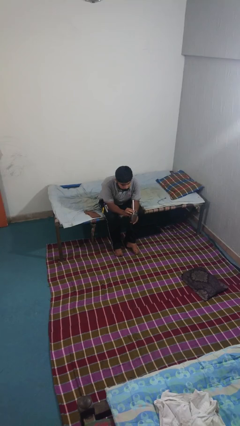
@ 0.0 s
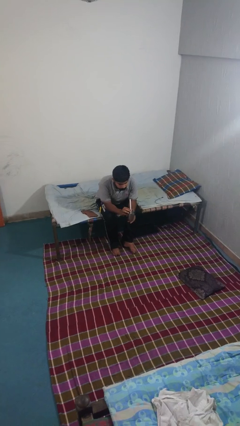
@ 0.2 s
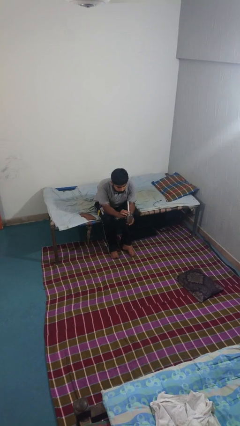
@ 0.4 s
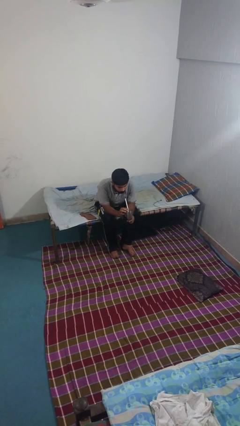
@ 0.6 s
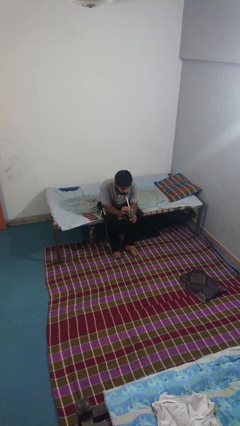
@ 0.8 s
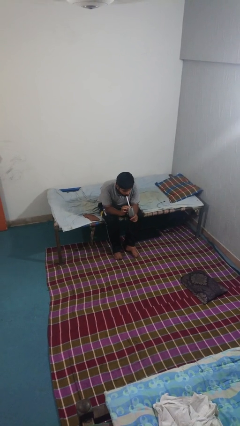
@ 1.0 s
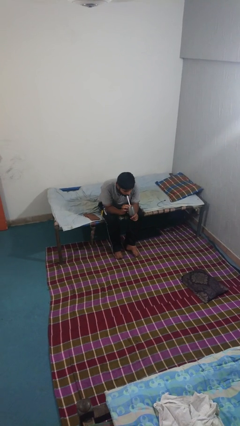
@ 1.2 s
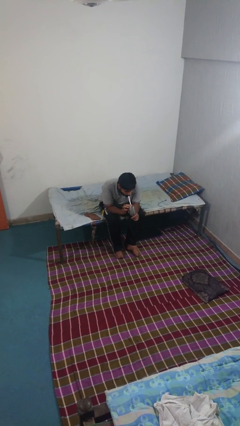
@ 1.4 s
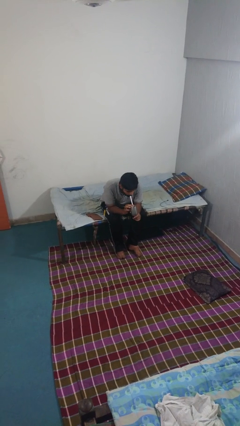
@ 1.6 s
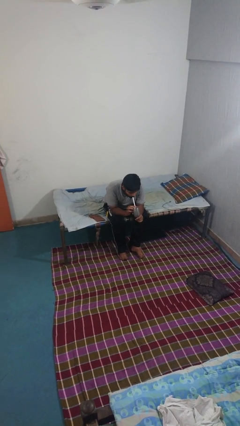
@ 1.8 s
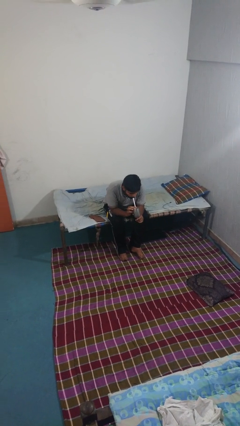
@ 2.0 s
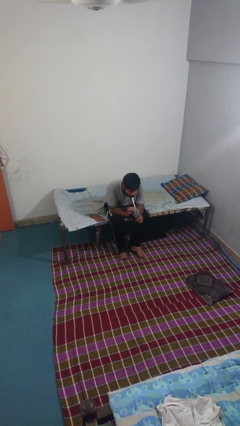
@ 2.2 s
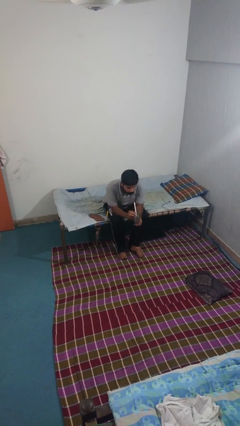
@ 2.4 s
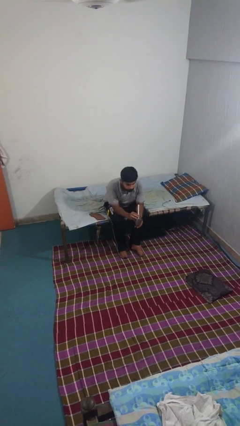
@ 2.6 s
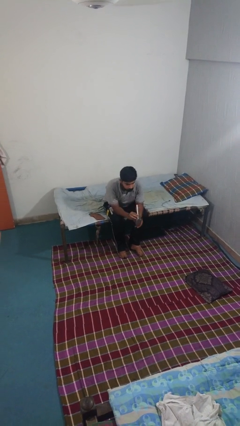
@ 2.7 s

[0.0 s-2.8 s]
person drinks from straw

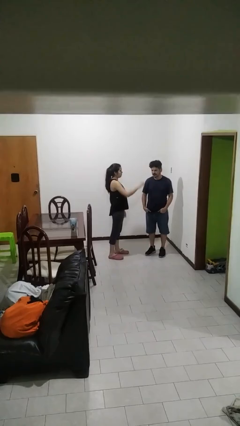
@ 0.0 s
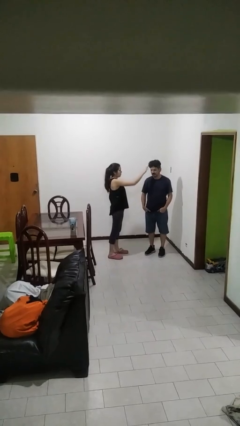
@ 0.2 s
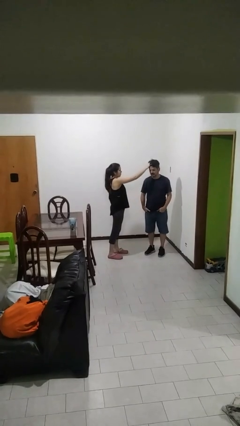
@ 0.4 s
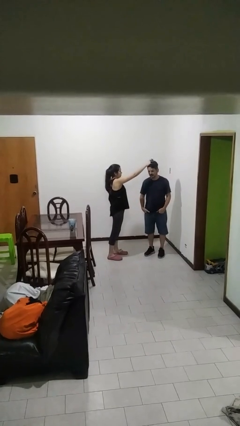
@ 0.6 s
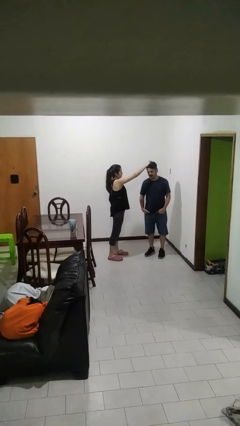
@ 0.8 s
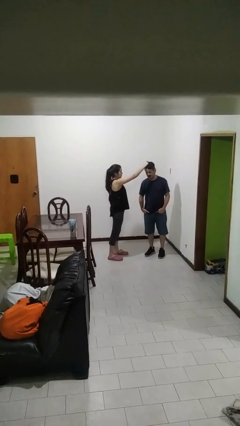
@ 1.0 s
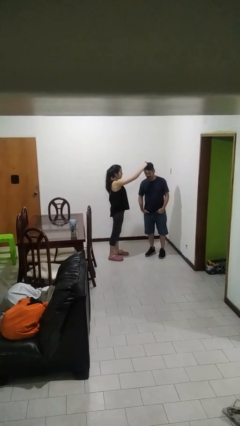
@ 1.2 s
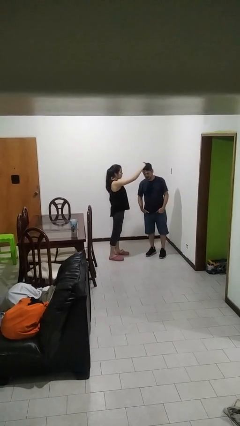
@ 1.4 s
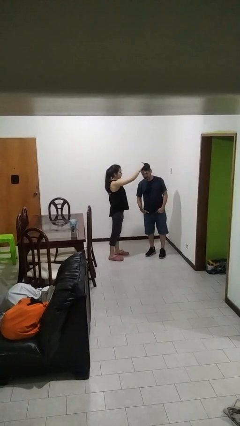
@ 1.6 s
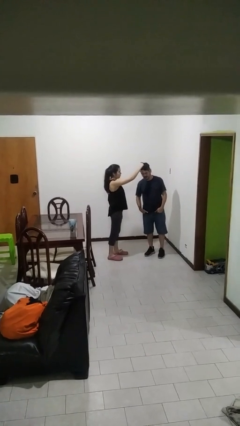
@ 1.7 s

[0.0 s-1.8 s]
person grabs person by hair

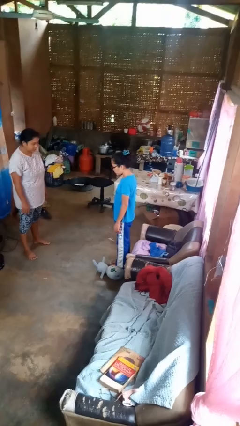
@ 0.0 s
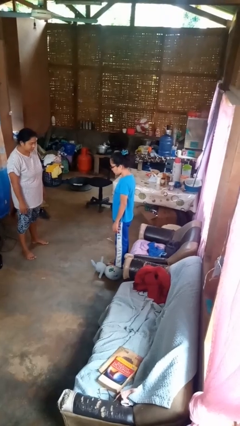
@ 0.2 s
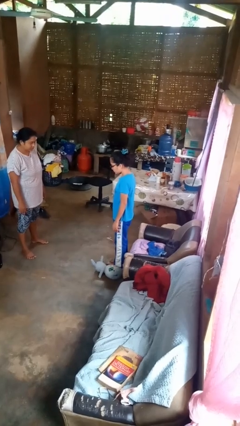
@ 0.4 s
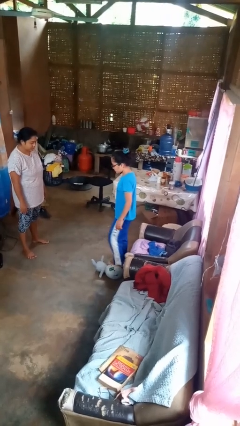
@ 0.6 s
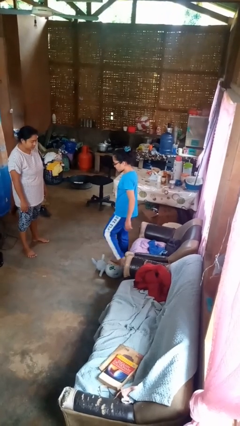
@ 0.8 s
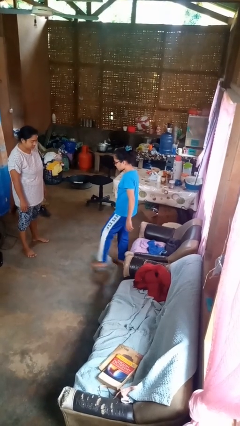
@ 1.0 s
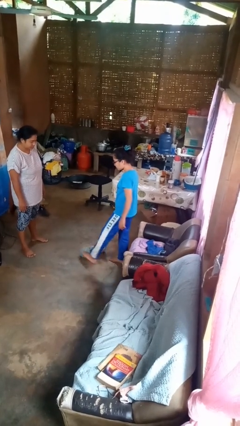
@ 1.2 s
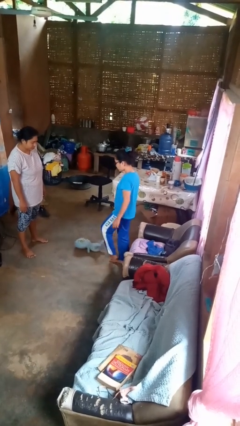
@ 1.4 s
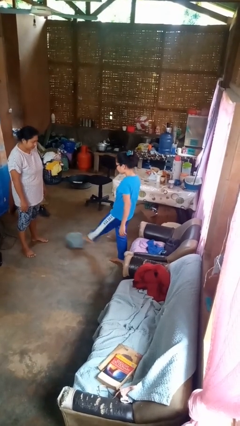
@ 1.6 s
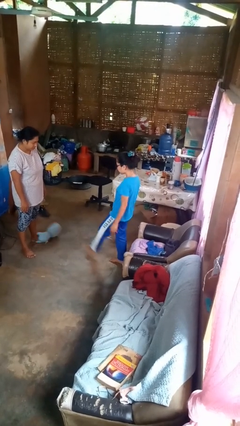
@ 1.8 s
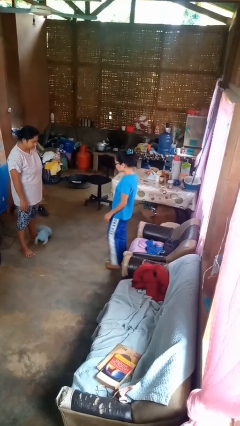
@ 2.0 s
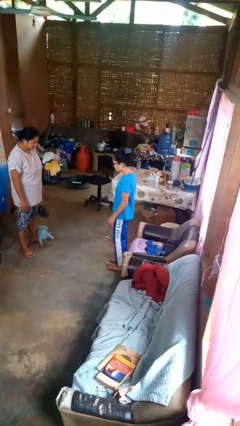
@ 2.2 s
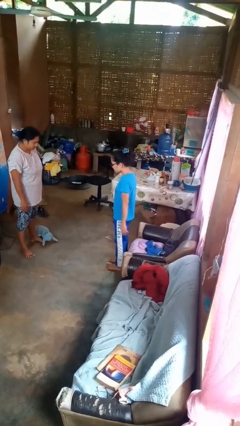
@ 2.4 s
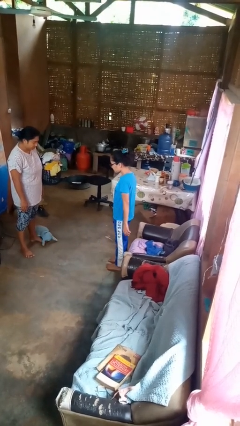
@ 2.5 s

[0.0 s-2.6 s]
person kicks object to person

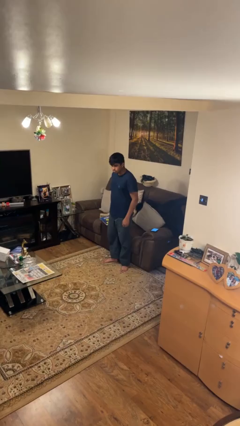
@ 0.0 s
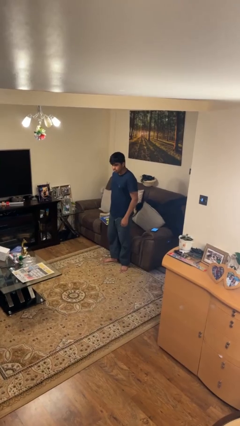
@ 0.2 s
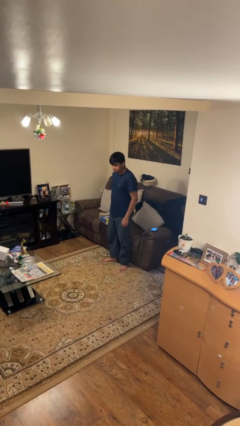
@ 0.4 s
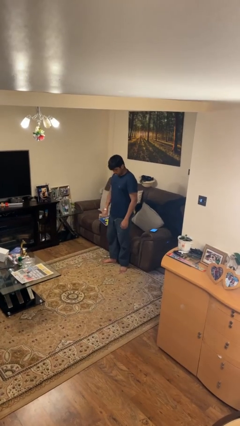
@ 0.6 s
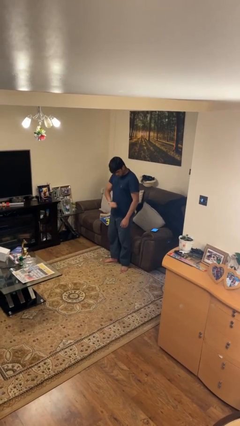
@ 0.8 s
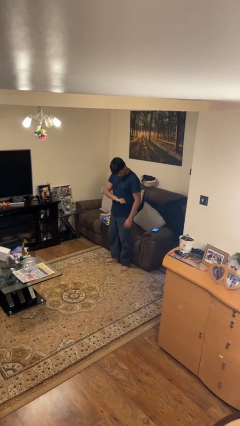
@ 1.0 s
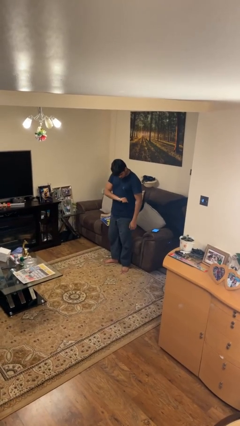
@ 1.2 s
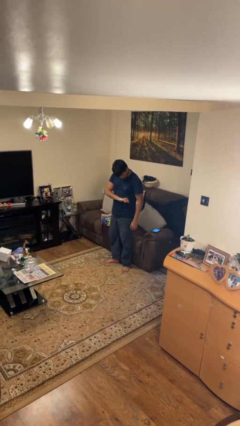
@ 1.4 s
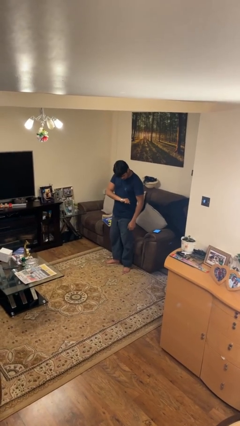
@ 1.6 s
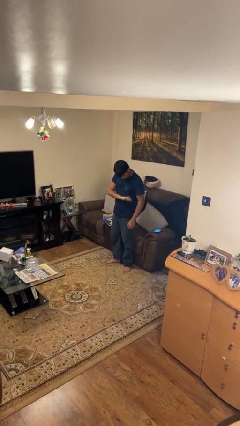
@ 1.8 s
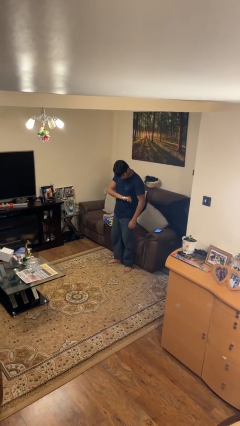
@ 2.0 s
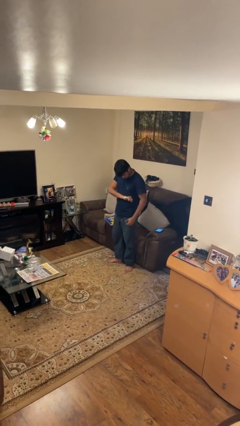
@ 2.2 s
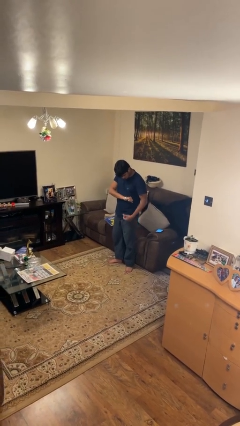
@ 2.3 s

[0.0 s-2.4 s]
person looks at wristwatch

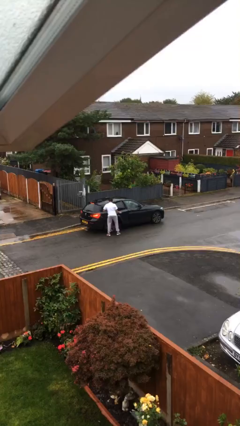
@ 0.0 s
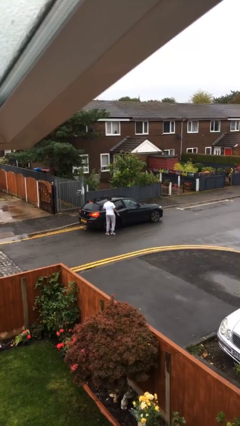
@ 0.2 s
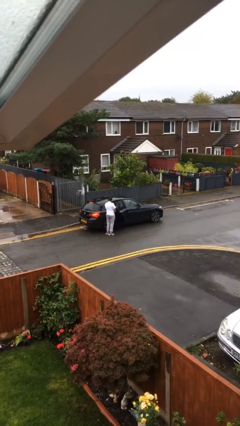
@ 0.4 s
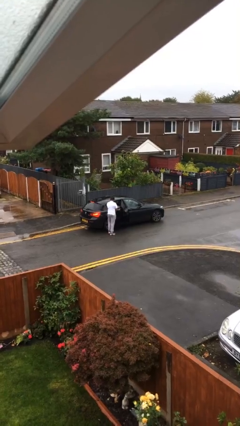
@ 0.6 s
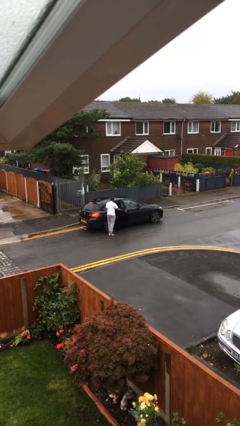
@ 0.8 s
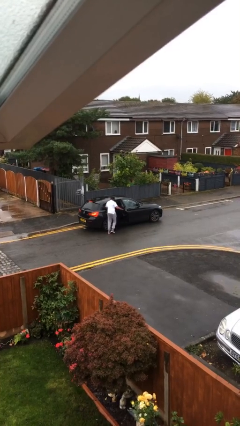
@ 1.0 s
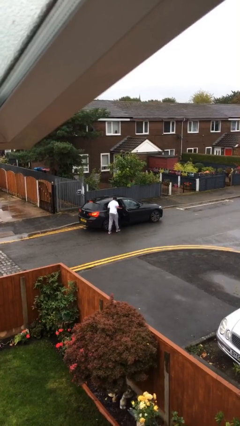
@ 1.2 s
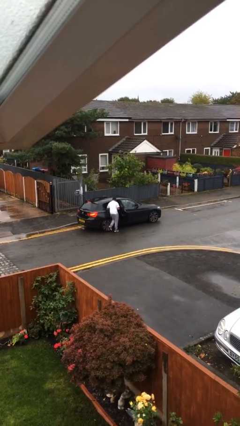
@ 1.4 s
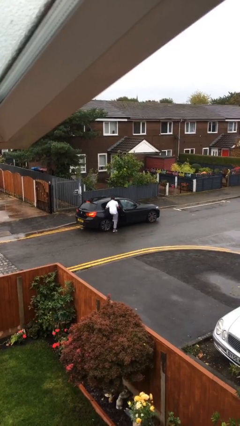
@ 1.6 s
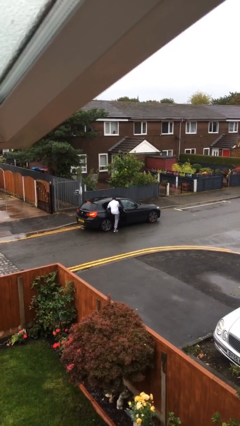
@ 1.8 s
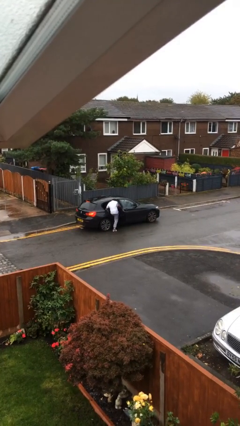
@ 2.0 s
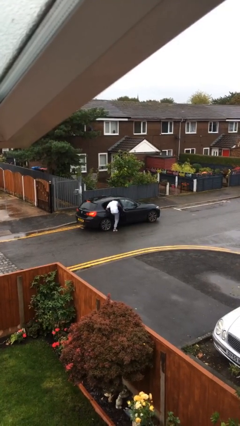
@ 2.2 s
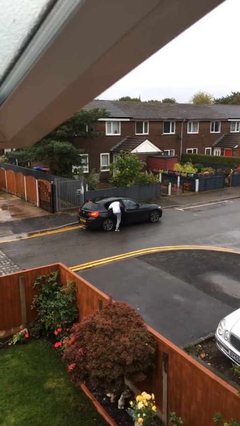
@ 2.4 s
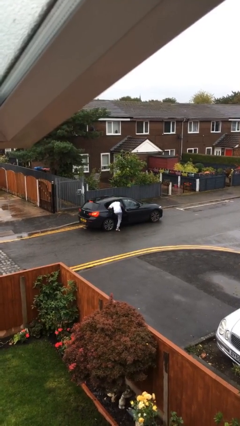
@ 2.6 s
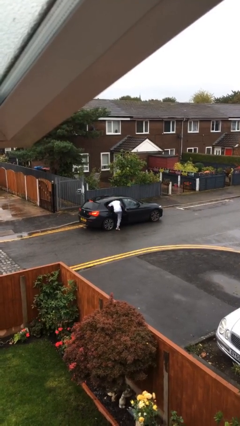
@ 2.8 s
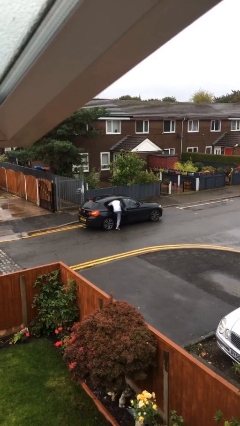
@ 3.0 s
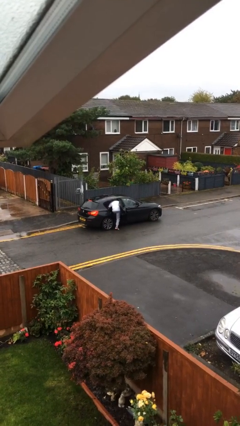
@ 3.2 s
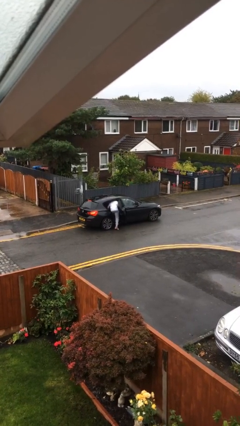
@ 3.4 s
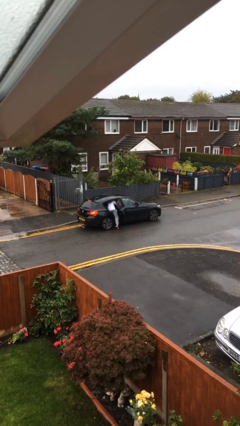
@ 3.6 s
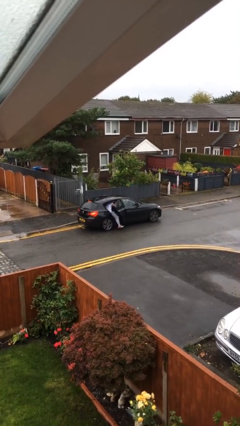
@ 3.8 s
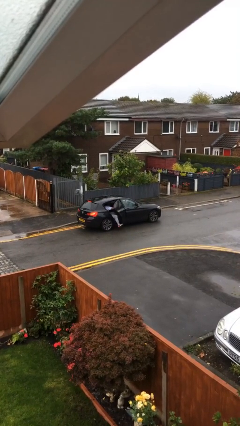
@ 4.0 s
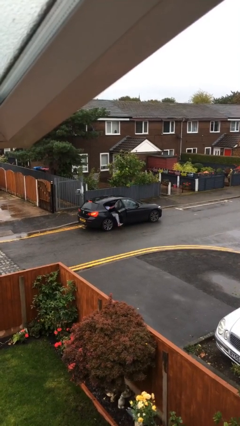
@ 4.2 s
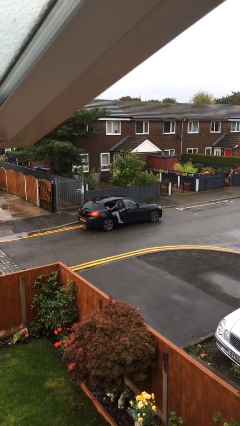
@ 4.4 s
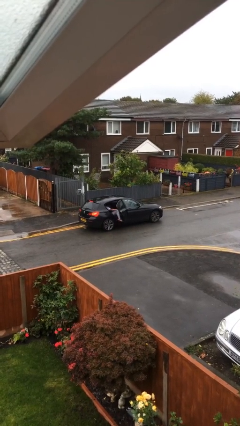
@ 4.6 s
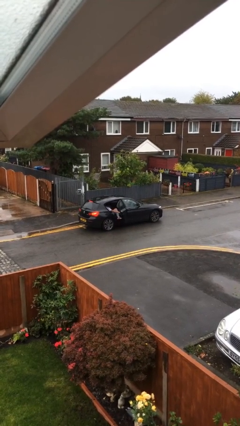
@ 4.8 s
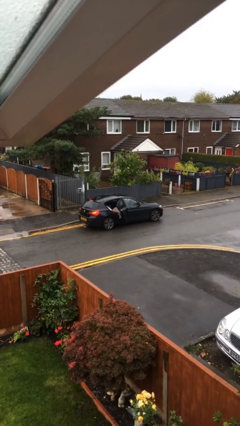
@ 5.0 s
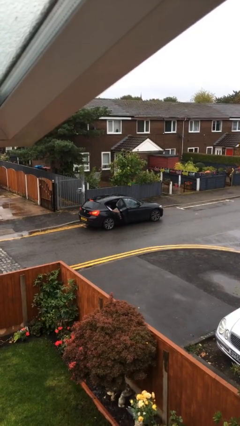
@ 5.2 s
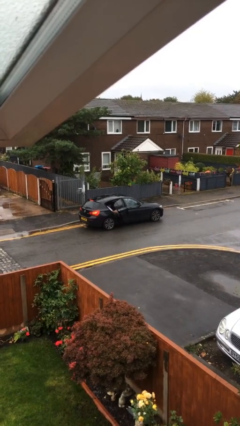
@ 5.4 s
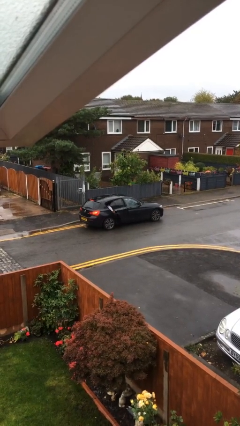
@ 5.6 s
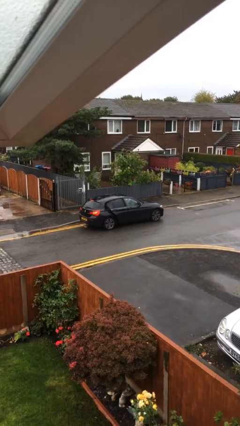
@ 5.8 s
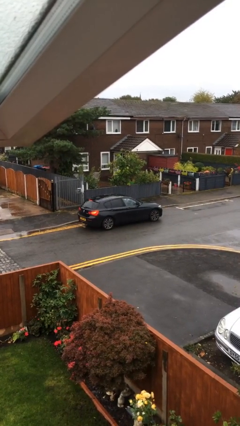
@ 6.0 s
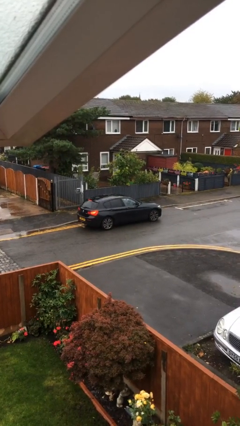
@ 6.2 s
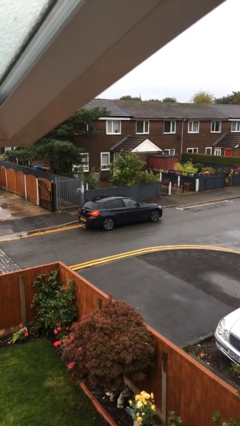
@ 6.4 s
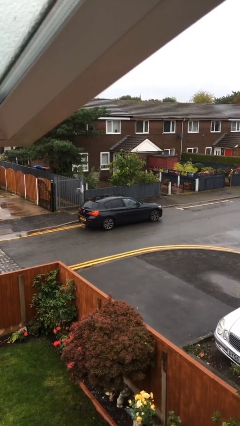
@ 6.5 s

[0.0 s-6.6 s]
car picks up person

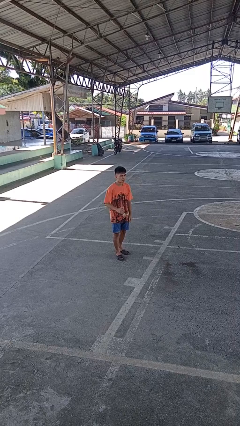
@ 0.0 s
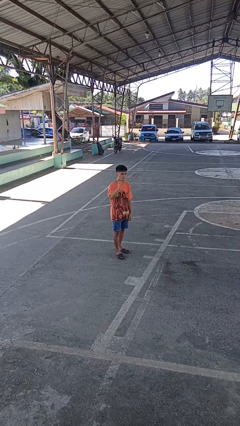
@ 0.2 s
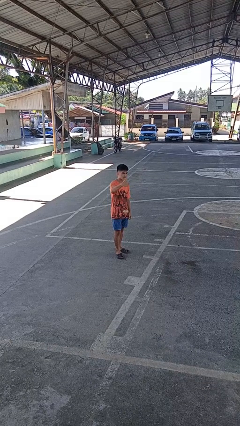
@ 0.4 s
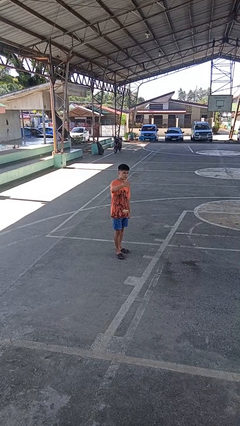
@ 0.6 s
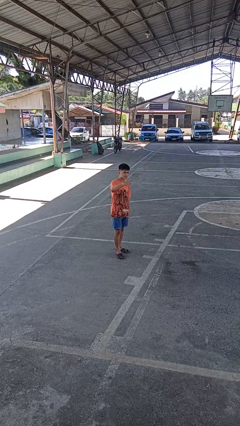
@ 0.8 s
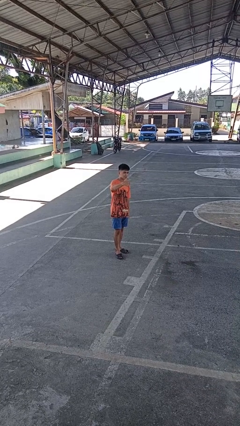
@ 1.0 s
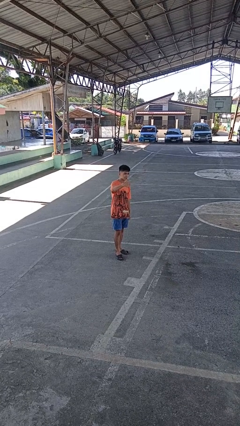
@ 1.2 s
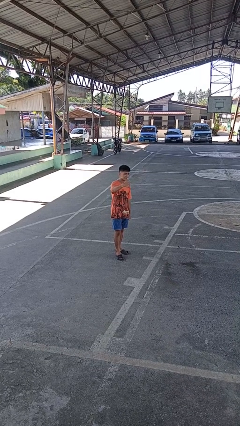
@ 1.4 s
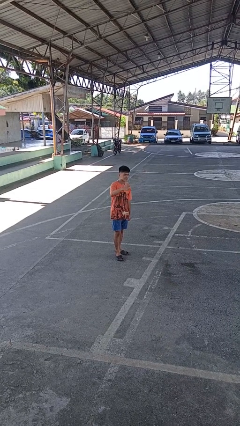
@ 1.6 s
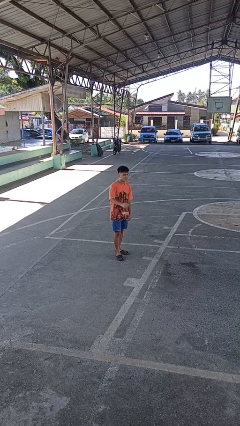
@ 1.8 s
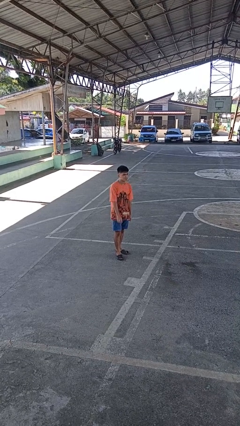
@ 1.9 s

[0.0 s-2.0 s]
person gestures thumbs up
